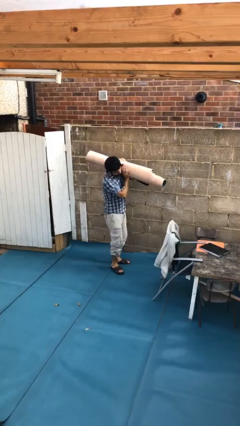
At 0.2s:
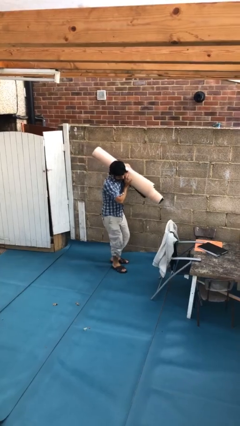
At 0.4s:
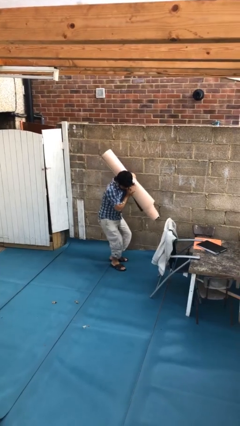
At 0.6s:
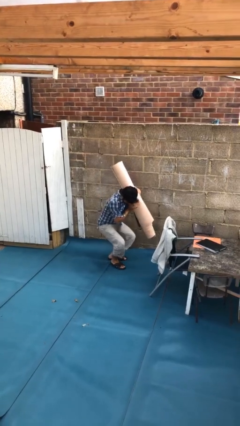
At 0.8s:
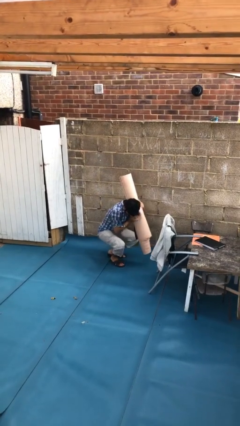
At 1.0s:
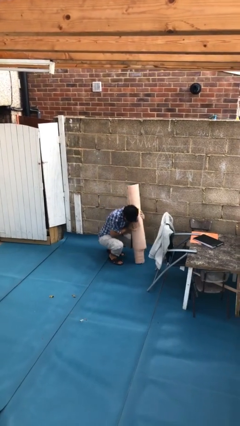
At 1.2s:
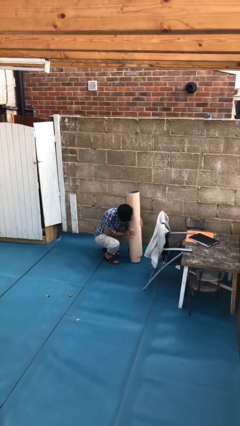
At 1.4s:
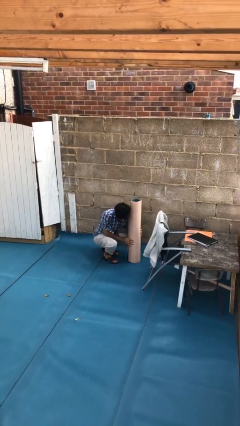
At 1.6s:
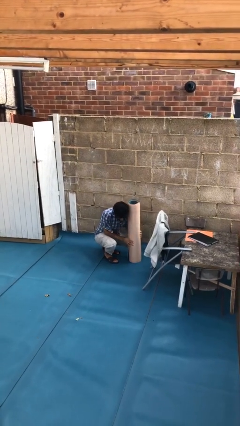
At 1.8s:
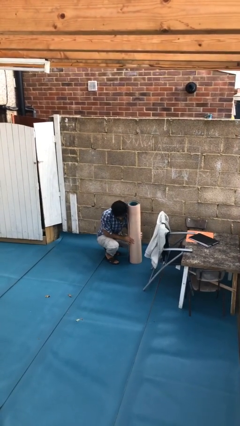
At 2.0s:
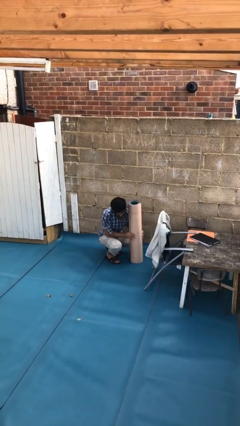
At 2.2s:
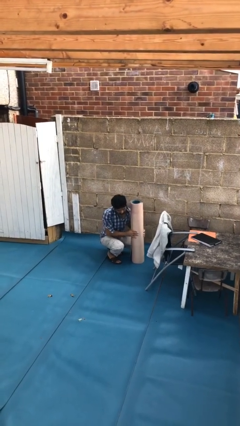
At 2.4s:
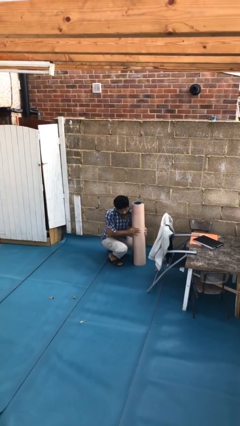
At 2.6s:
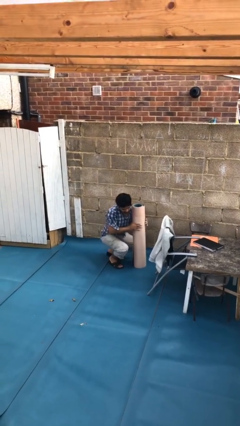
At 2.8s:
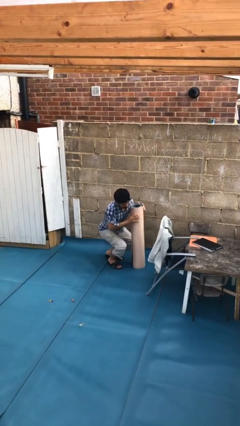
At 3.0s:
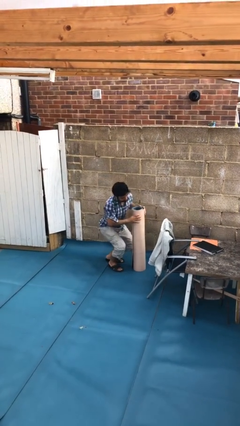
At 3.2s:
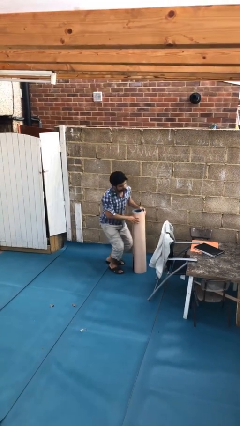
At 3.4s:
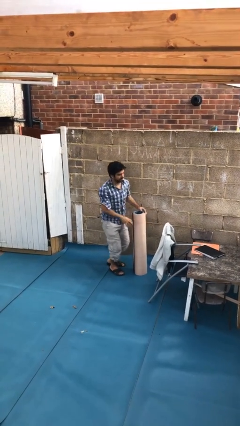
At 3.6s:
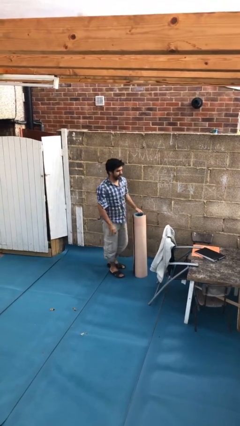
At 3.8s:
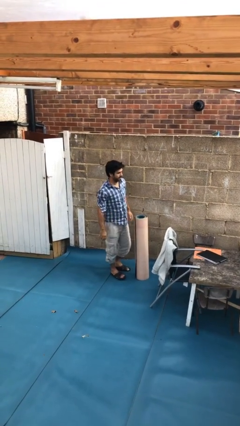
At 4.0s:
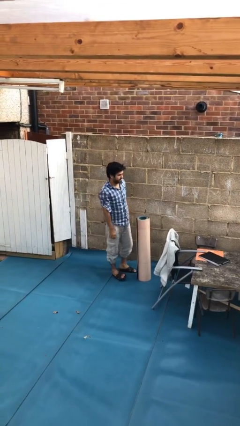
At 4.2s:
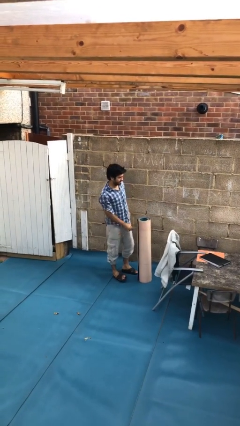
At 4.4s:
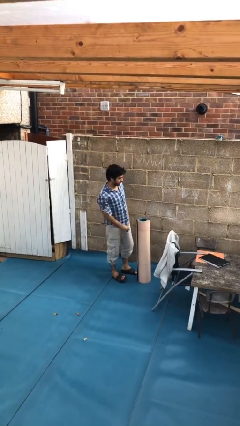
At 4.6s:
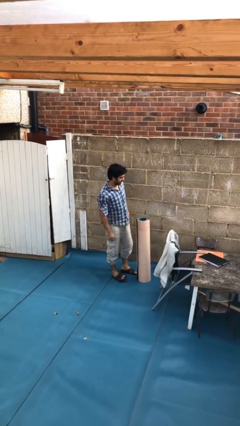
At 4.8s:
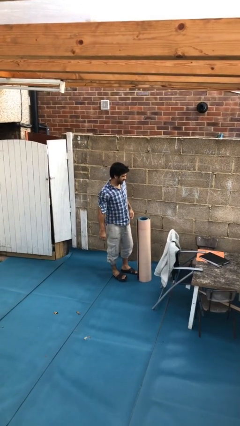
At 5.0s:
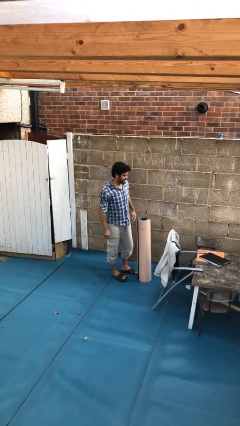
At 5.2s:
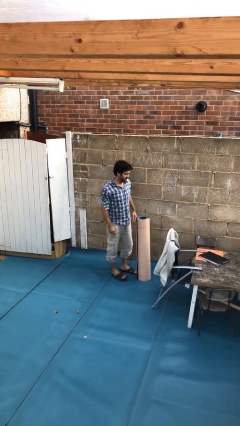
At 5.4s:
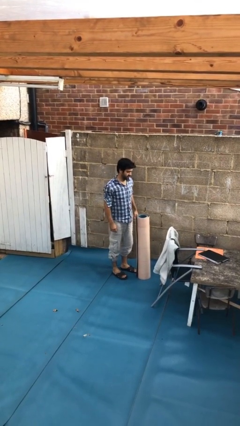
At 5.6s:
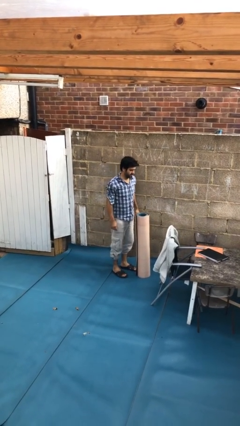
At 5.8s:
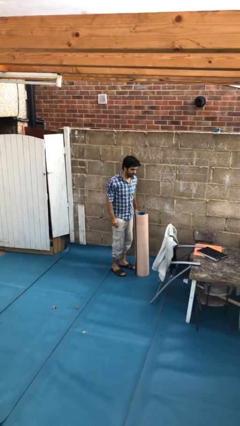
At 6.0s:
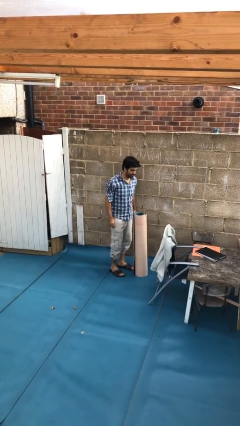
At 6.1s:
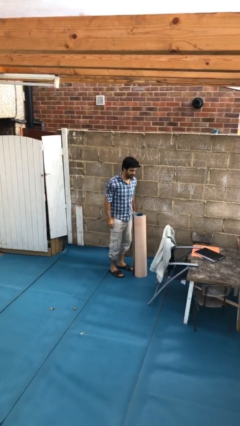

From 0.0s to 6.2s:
person puts down object on floor

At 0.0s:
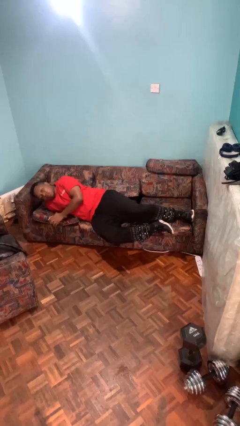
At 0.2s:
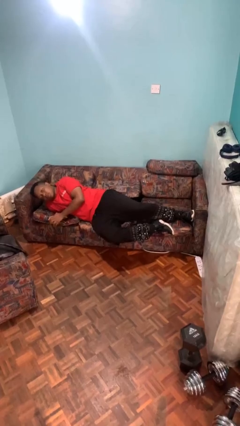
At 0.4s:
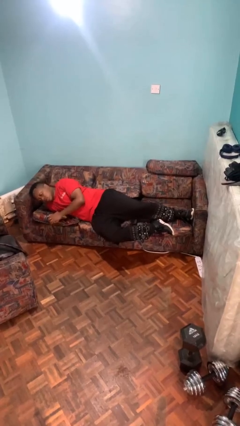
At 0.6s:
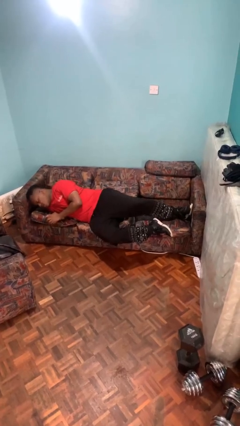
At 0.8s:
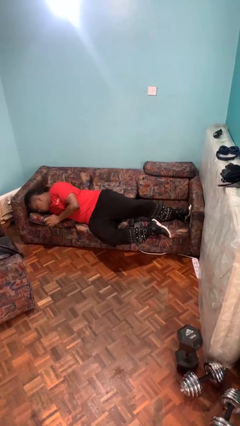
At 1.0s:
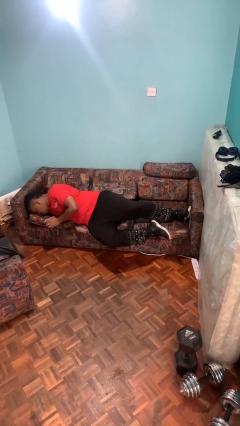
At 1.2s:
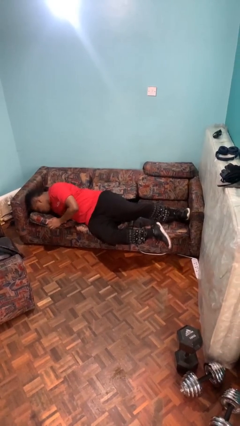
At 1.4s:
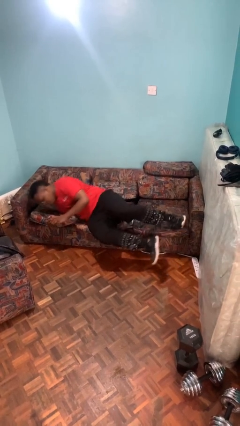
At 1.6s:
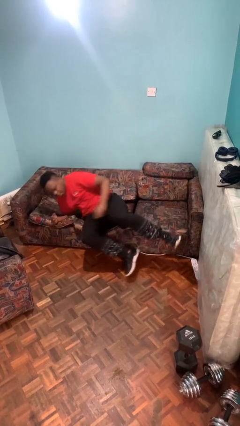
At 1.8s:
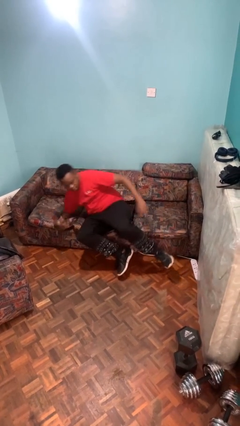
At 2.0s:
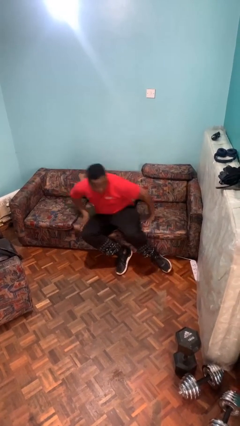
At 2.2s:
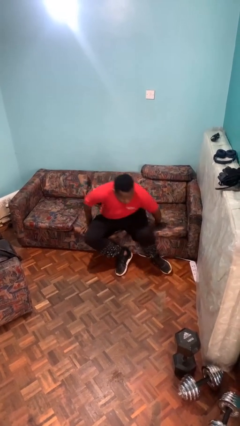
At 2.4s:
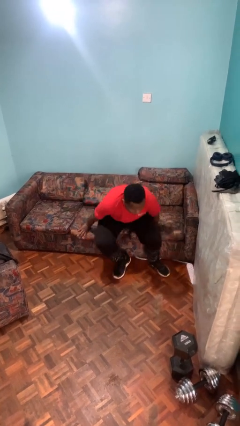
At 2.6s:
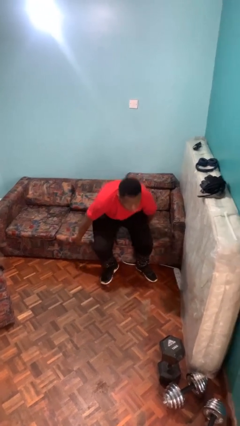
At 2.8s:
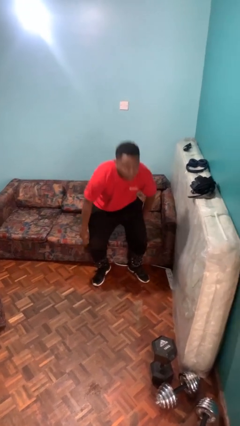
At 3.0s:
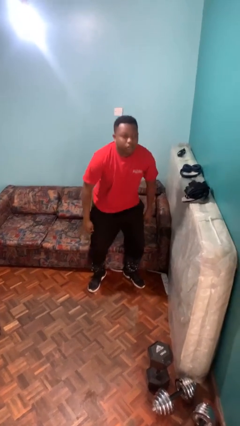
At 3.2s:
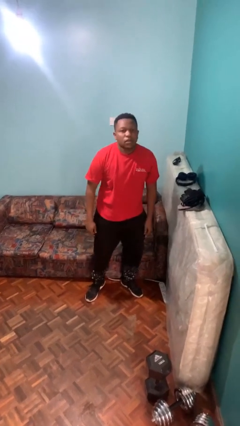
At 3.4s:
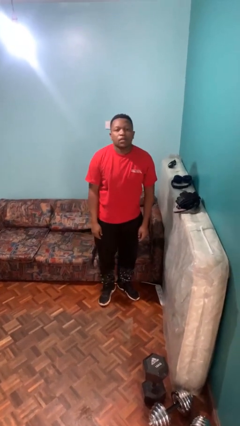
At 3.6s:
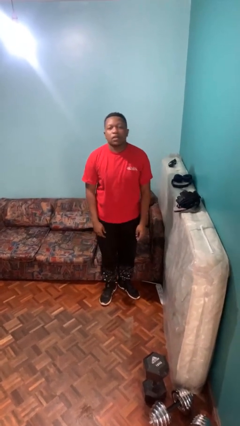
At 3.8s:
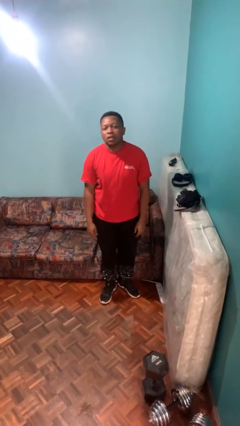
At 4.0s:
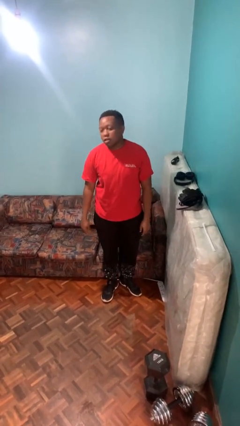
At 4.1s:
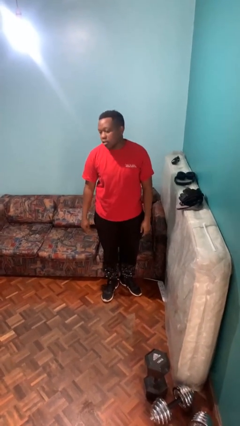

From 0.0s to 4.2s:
person stands up

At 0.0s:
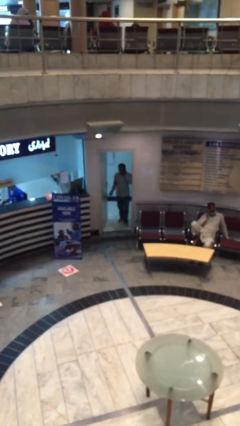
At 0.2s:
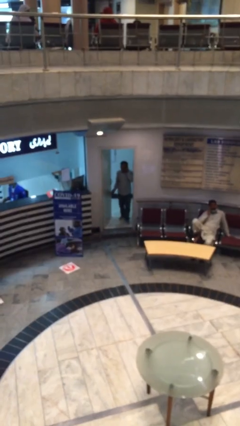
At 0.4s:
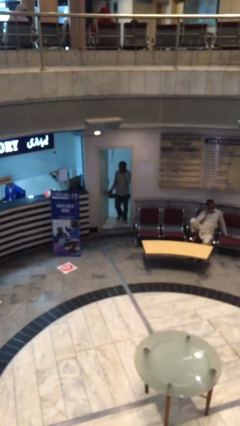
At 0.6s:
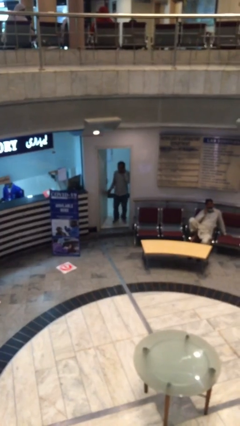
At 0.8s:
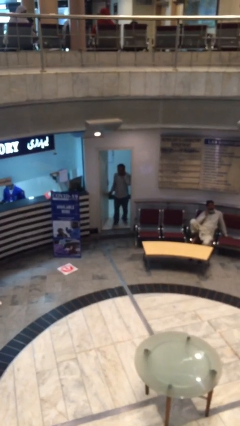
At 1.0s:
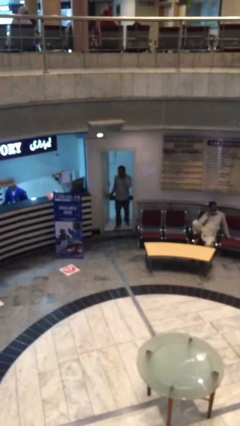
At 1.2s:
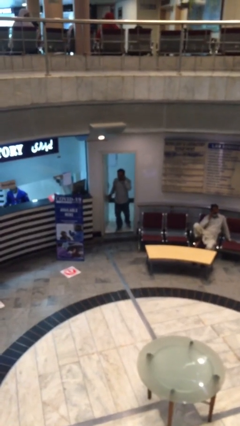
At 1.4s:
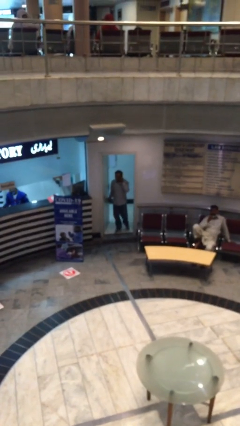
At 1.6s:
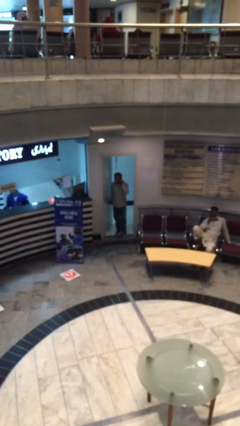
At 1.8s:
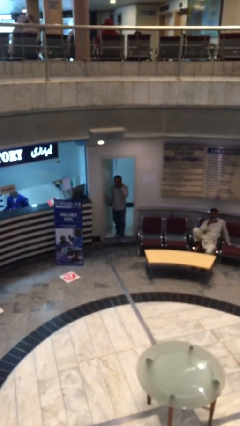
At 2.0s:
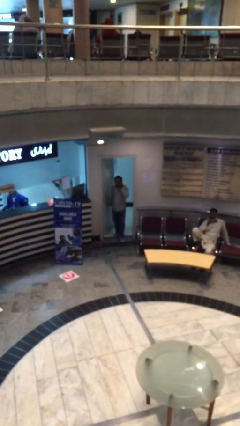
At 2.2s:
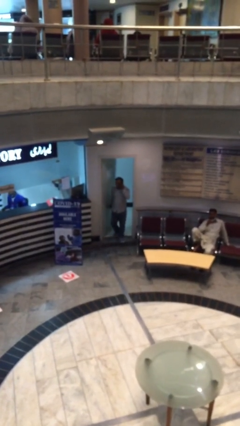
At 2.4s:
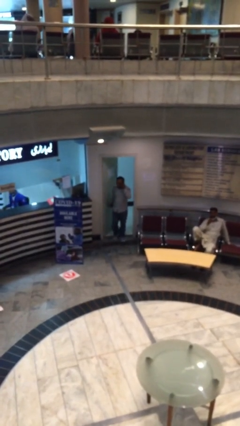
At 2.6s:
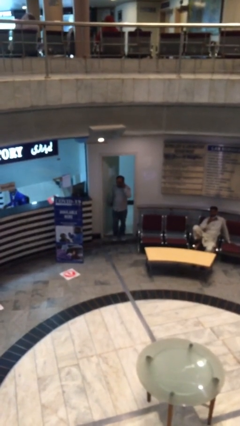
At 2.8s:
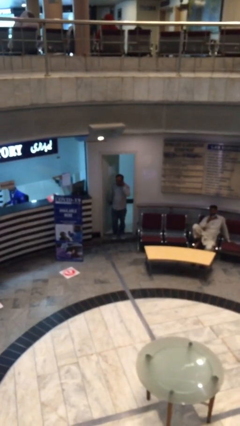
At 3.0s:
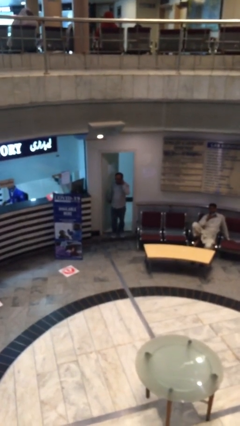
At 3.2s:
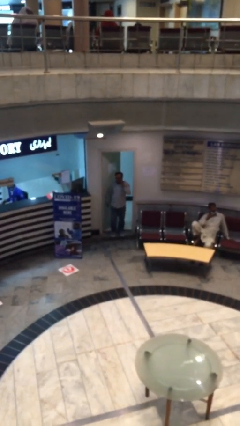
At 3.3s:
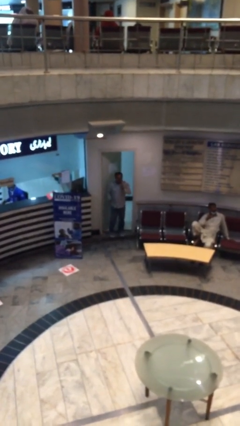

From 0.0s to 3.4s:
person enters scene through structure

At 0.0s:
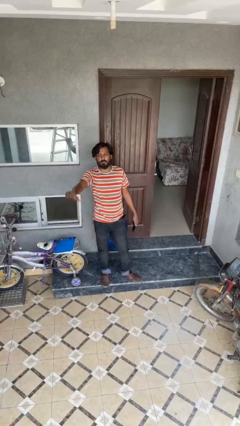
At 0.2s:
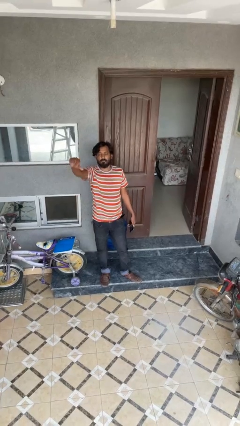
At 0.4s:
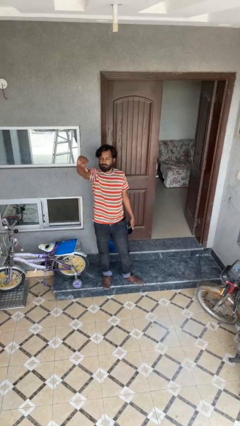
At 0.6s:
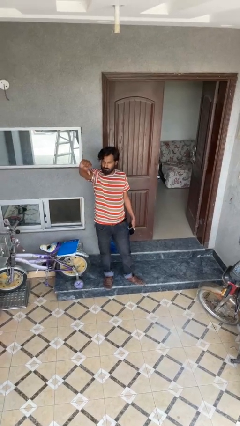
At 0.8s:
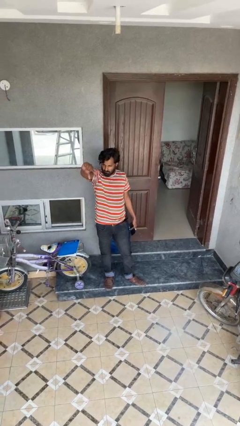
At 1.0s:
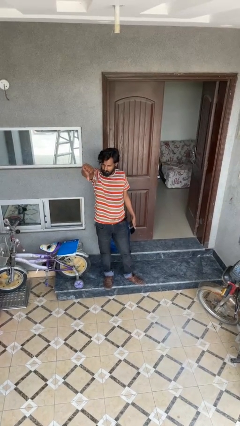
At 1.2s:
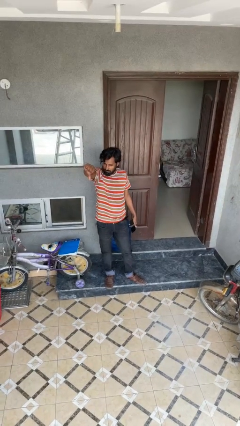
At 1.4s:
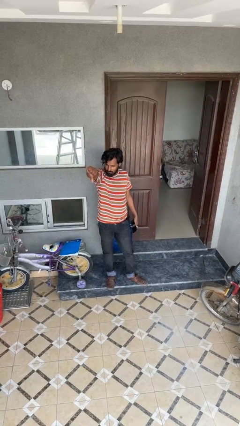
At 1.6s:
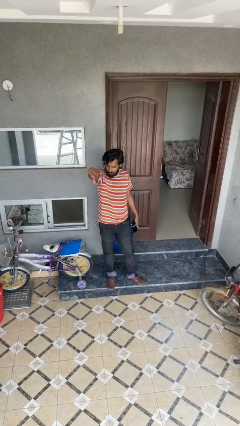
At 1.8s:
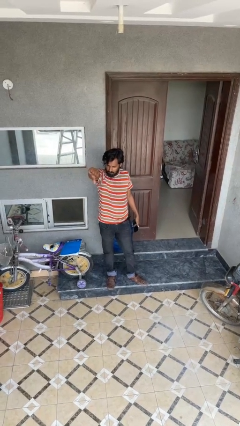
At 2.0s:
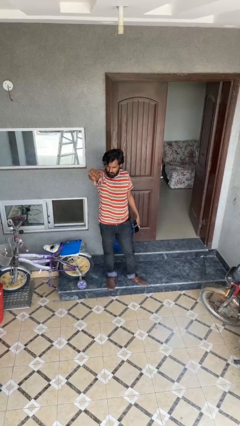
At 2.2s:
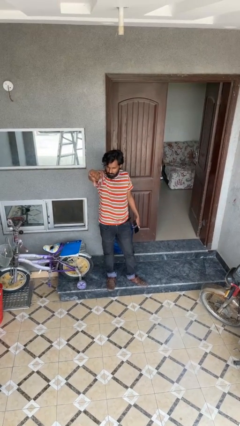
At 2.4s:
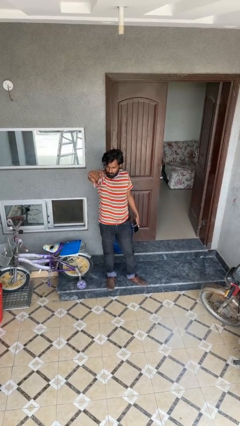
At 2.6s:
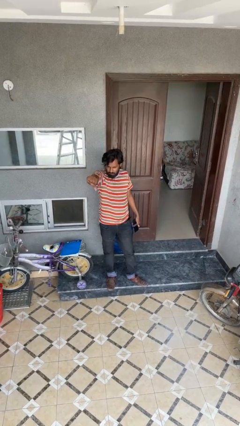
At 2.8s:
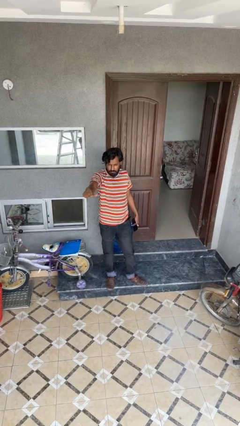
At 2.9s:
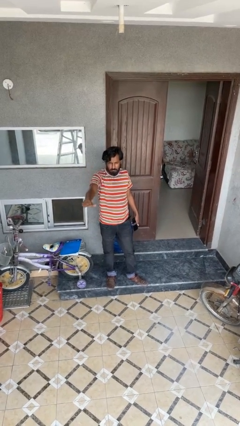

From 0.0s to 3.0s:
person gestures thumbs down

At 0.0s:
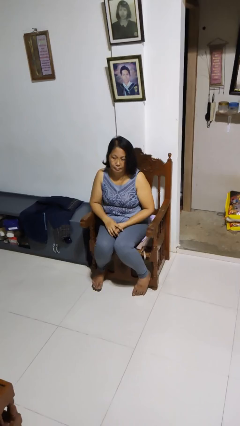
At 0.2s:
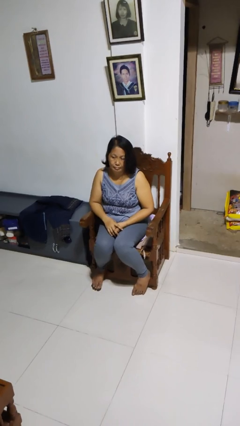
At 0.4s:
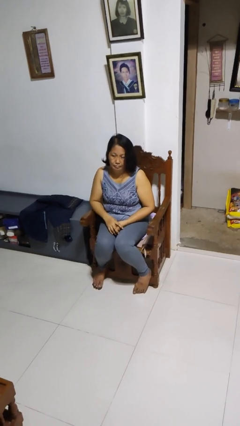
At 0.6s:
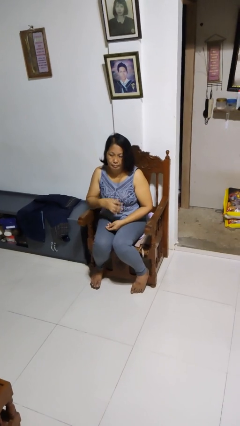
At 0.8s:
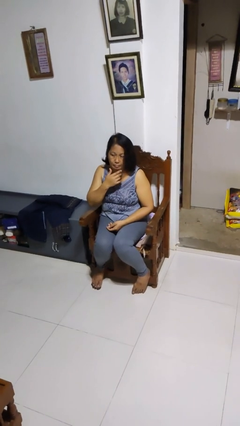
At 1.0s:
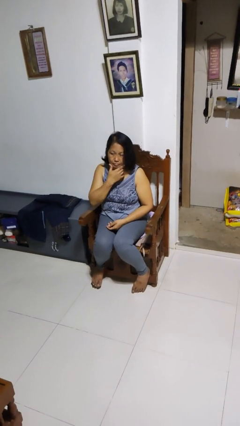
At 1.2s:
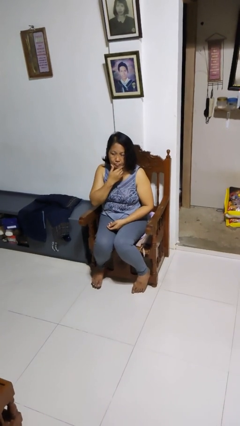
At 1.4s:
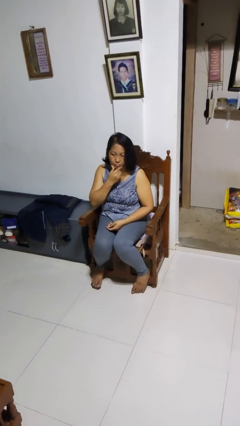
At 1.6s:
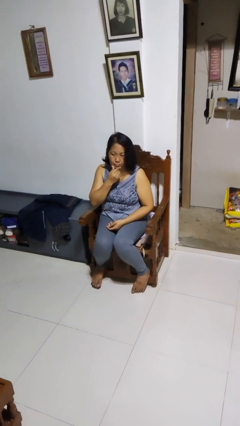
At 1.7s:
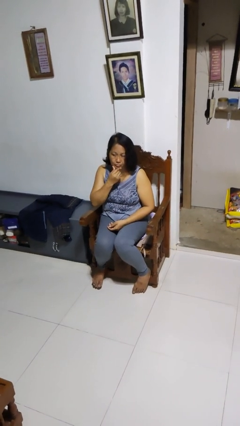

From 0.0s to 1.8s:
person strokes chin
